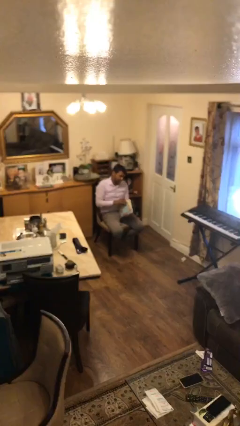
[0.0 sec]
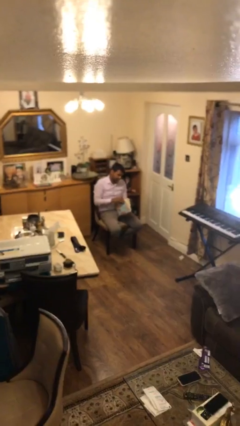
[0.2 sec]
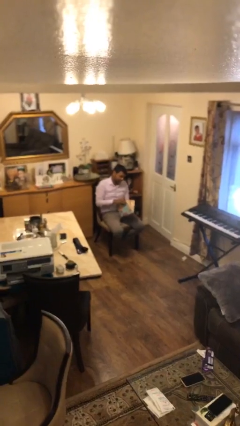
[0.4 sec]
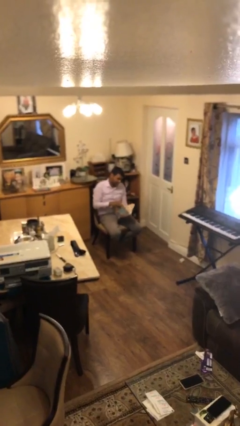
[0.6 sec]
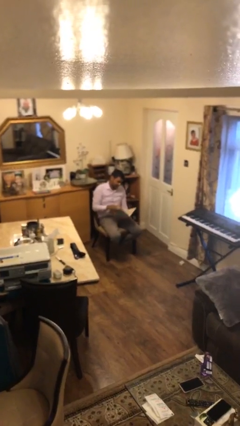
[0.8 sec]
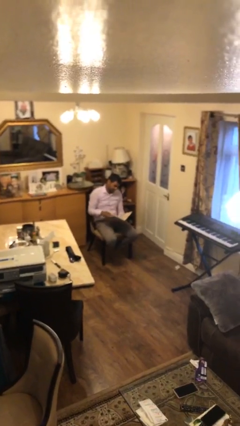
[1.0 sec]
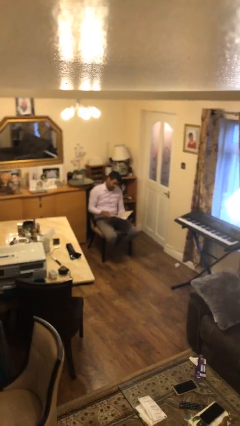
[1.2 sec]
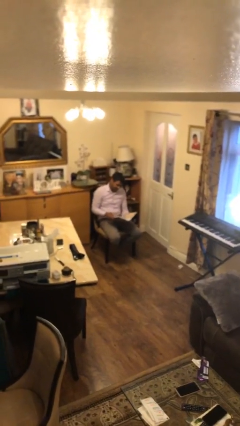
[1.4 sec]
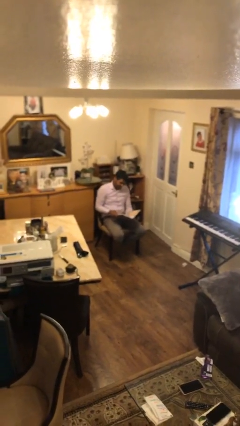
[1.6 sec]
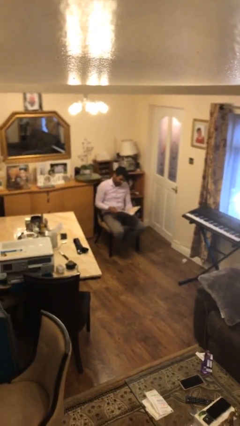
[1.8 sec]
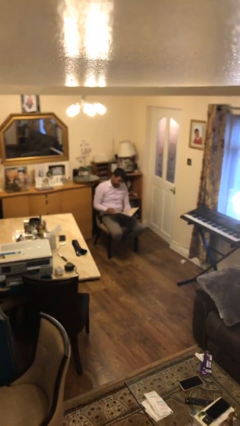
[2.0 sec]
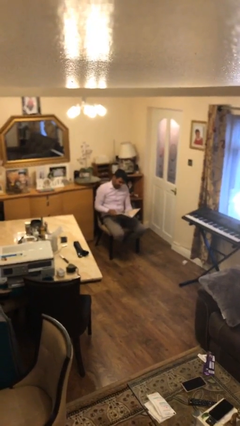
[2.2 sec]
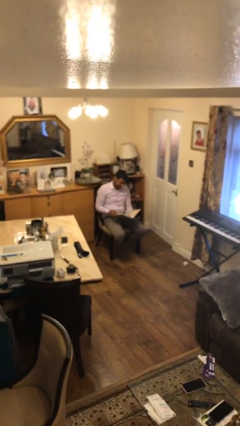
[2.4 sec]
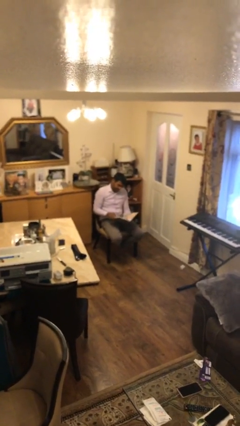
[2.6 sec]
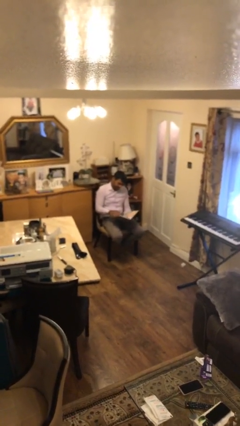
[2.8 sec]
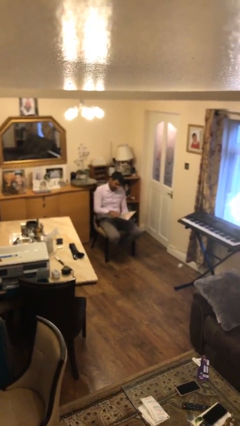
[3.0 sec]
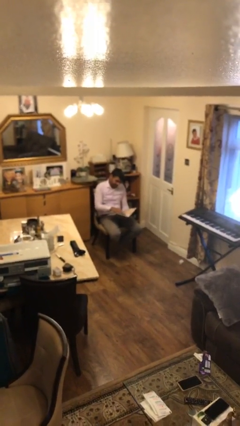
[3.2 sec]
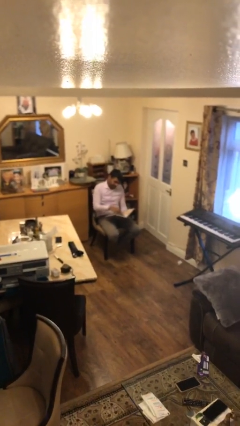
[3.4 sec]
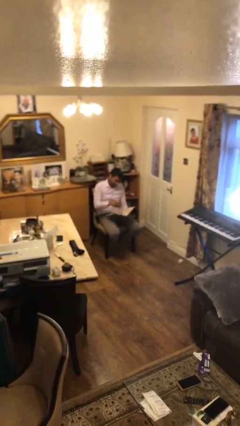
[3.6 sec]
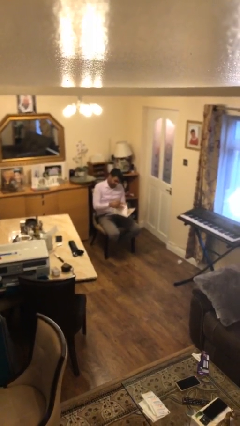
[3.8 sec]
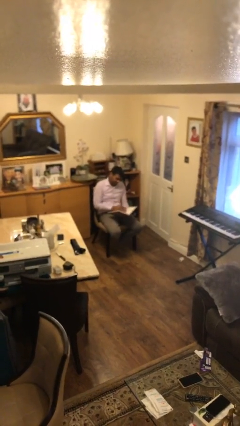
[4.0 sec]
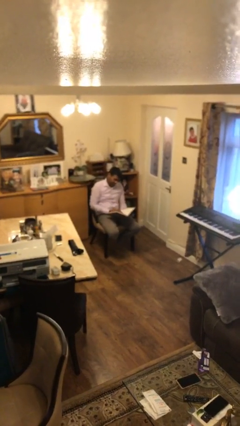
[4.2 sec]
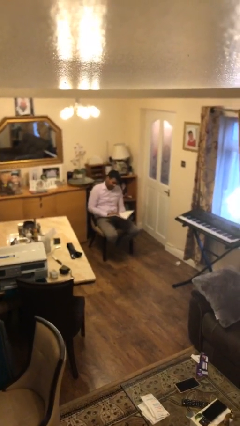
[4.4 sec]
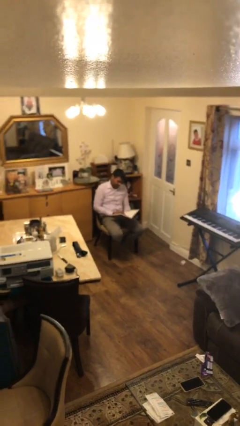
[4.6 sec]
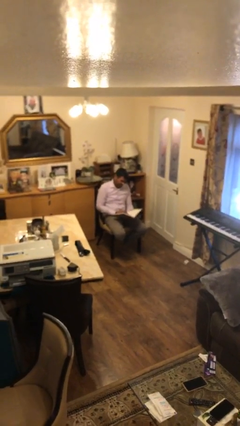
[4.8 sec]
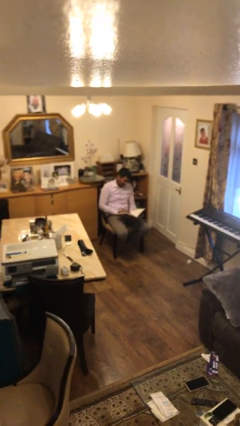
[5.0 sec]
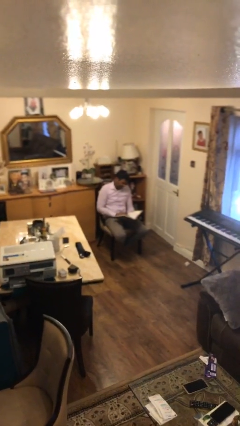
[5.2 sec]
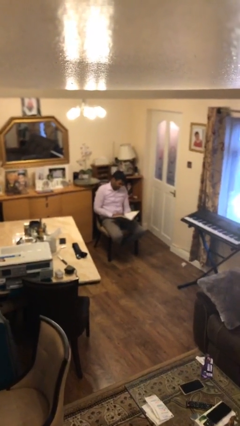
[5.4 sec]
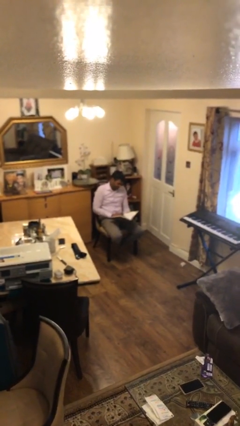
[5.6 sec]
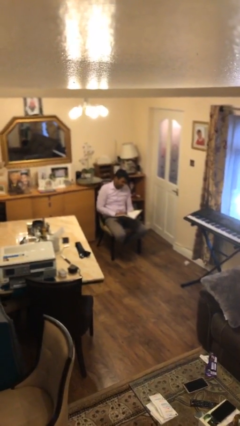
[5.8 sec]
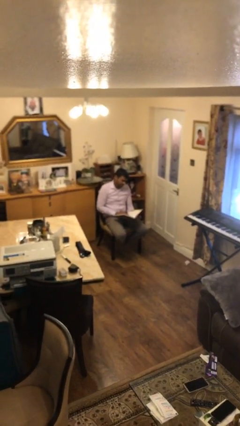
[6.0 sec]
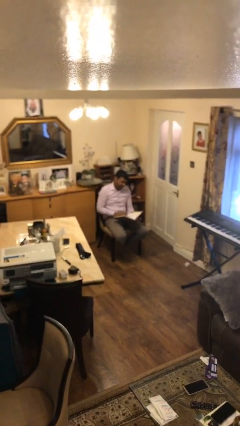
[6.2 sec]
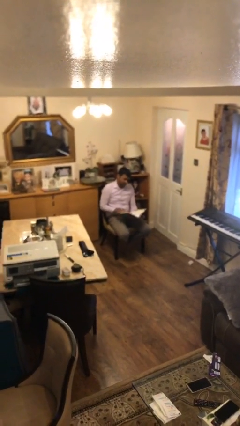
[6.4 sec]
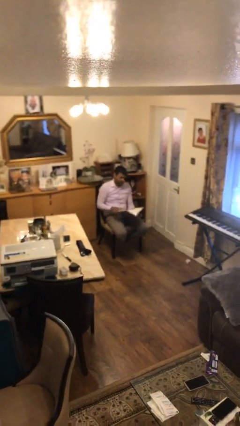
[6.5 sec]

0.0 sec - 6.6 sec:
person reads document

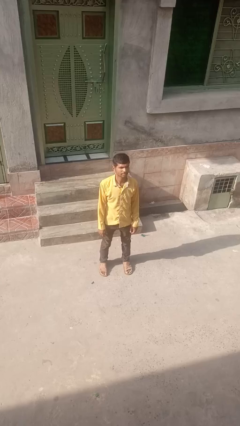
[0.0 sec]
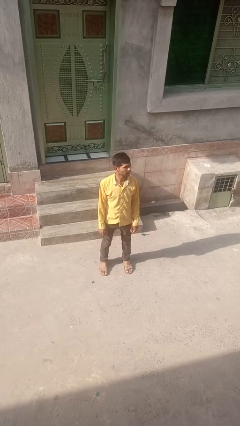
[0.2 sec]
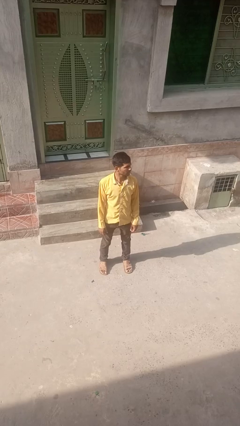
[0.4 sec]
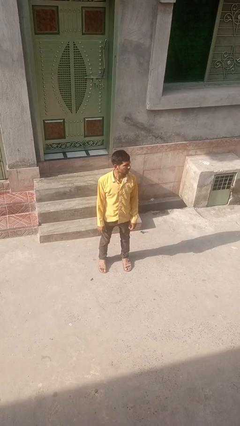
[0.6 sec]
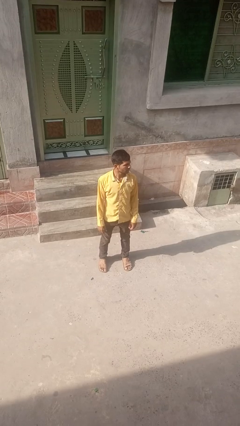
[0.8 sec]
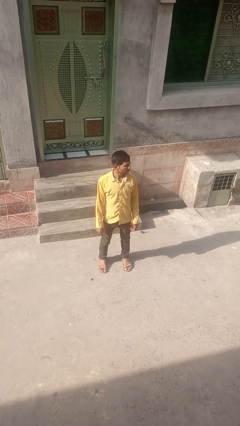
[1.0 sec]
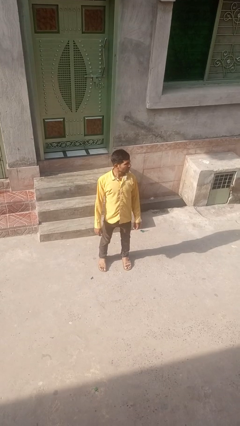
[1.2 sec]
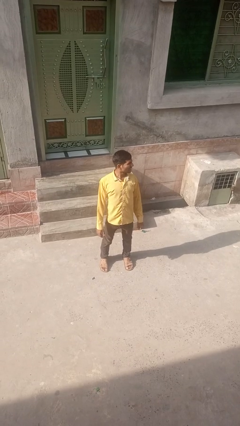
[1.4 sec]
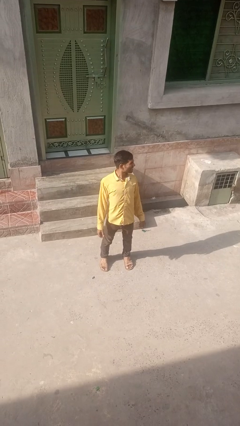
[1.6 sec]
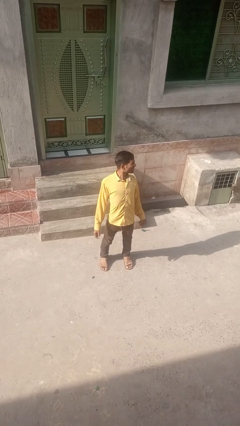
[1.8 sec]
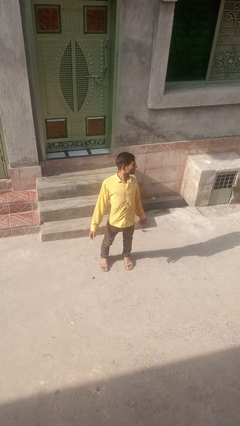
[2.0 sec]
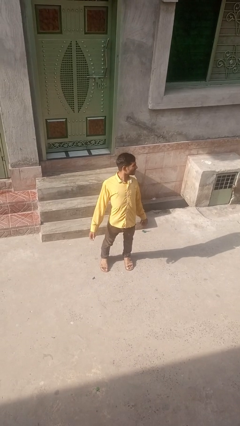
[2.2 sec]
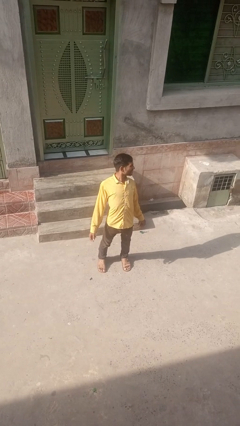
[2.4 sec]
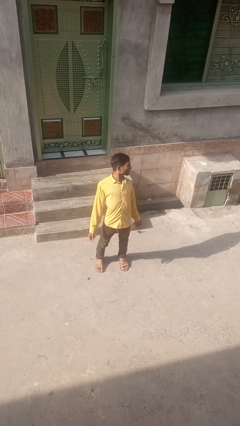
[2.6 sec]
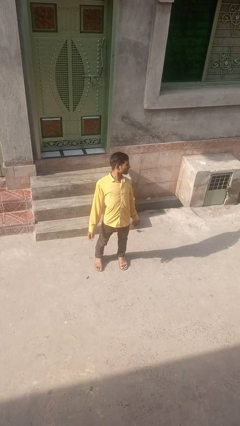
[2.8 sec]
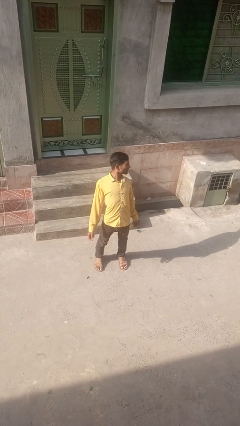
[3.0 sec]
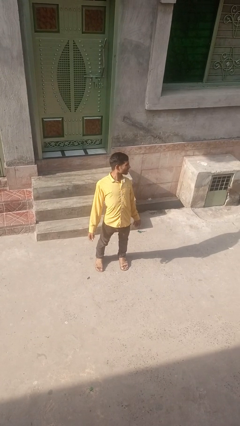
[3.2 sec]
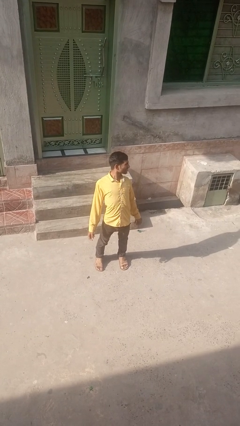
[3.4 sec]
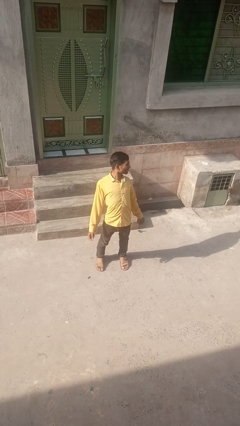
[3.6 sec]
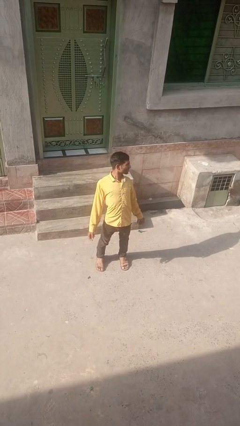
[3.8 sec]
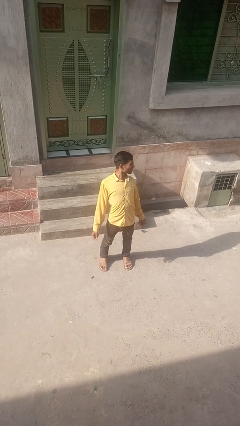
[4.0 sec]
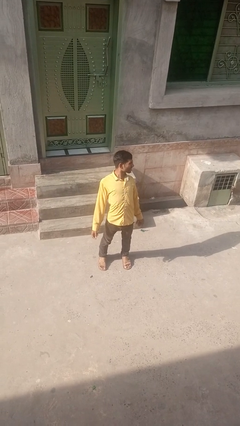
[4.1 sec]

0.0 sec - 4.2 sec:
person stretches back

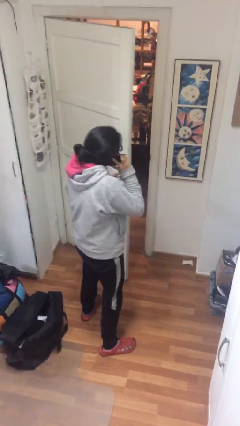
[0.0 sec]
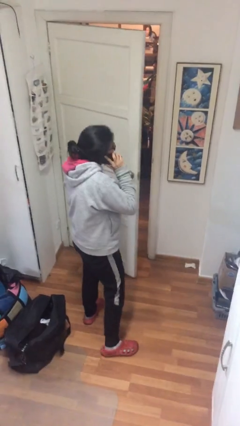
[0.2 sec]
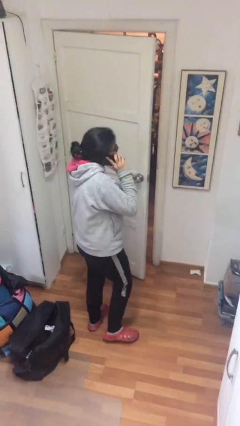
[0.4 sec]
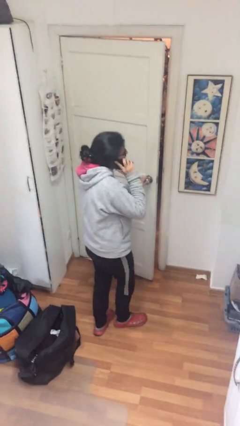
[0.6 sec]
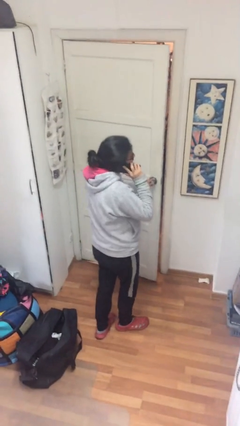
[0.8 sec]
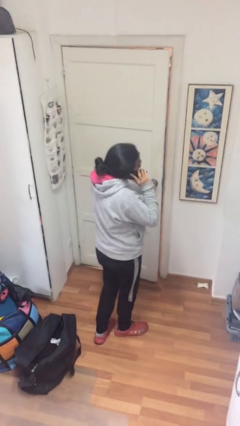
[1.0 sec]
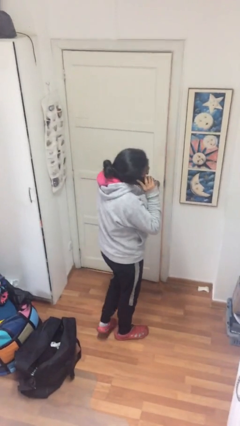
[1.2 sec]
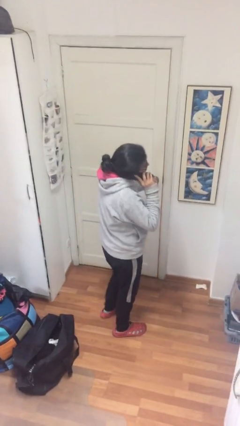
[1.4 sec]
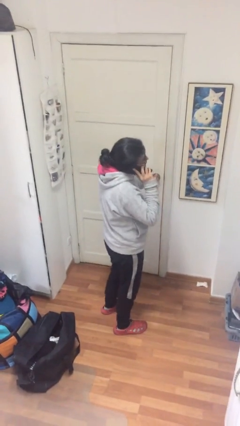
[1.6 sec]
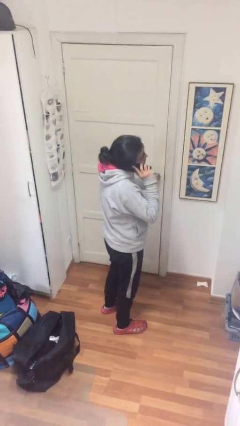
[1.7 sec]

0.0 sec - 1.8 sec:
person closes facility door

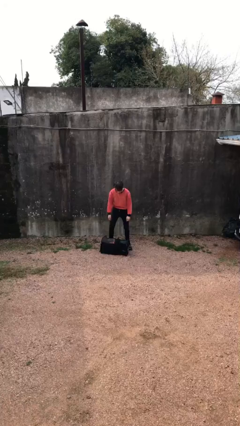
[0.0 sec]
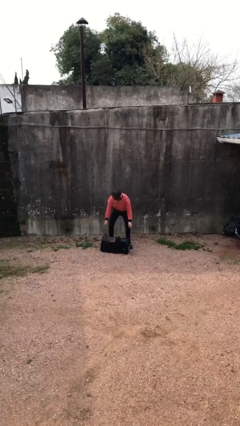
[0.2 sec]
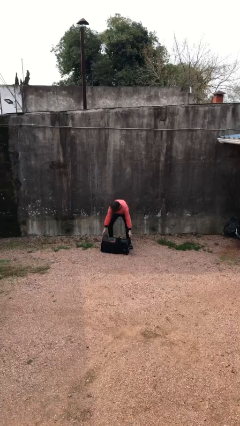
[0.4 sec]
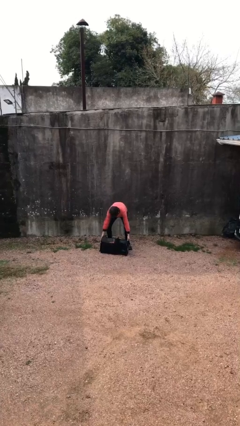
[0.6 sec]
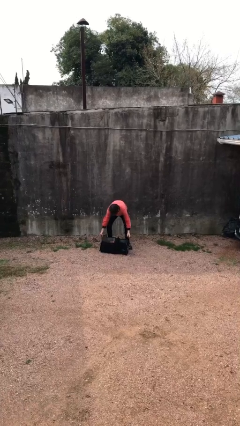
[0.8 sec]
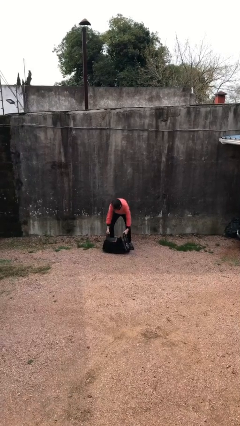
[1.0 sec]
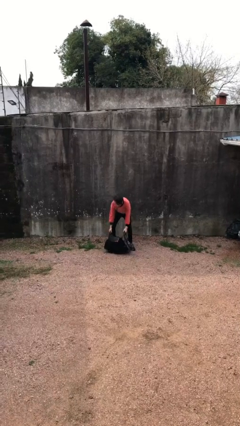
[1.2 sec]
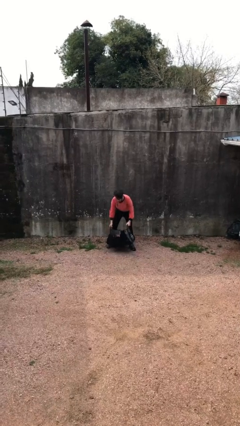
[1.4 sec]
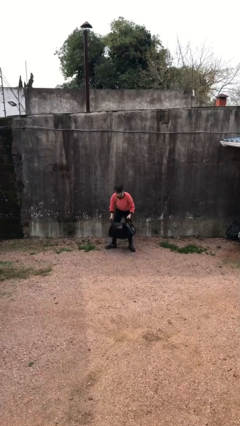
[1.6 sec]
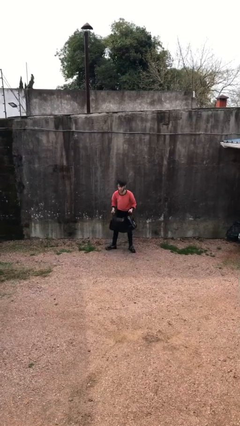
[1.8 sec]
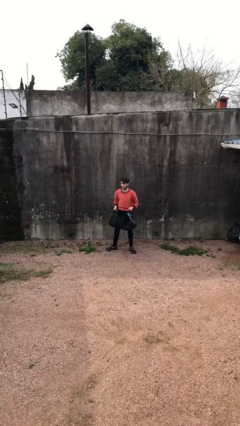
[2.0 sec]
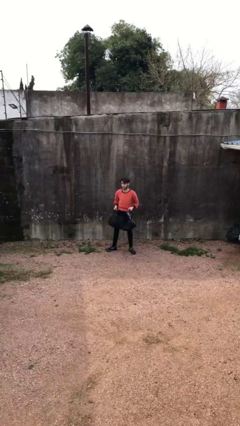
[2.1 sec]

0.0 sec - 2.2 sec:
person picks up object from floor

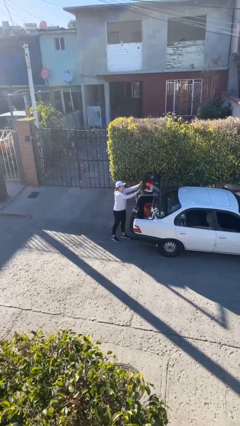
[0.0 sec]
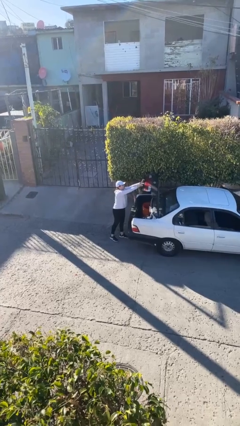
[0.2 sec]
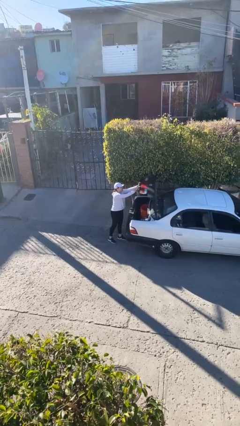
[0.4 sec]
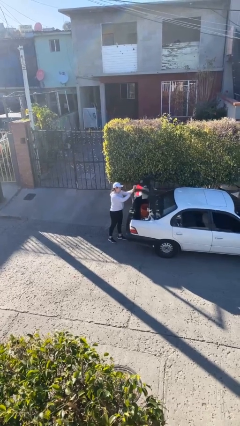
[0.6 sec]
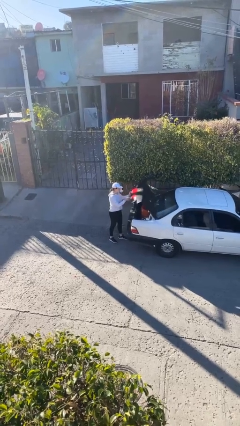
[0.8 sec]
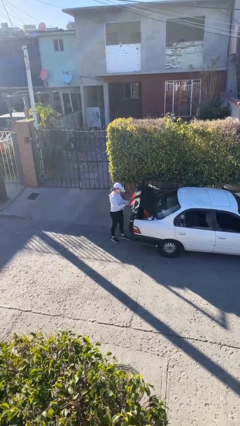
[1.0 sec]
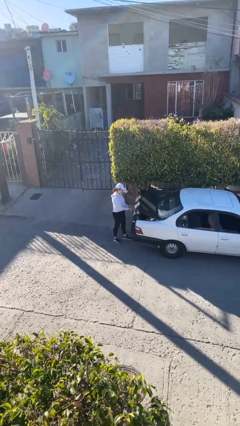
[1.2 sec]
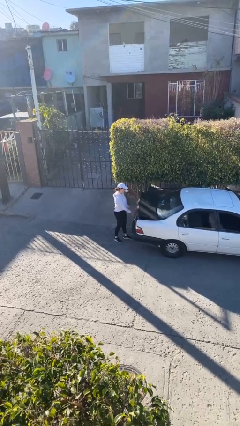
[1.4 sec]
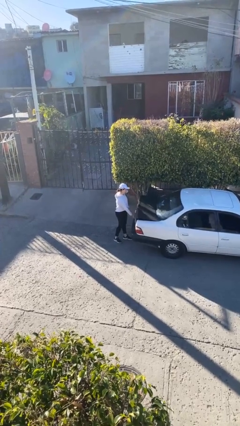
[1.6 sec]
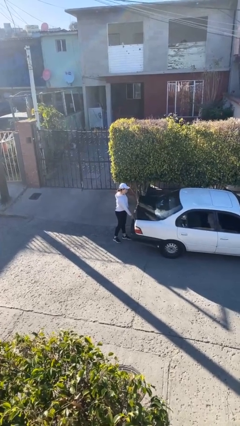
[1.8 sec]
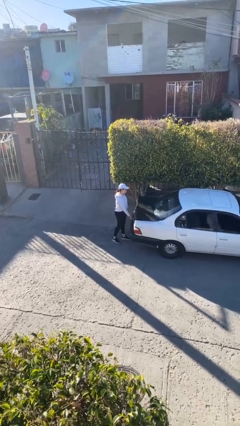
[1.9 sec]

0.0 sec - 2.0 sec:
person closes car trunk

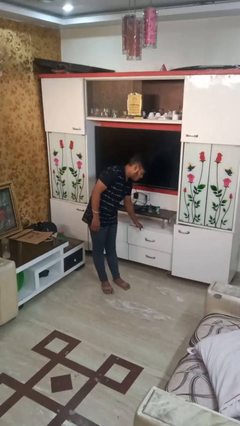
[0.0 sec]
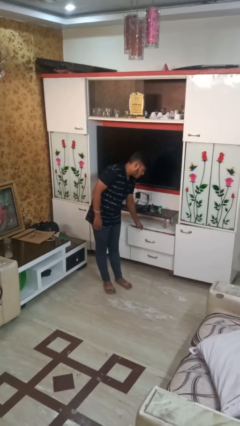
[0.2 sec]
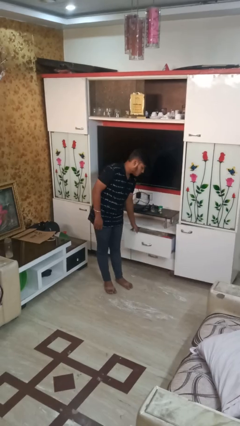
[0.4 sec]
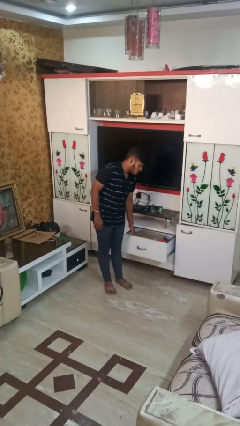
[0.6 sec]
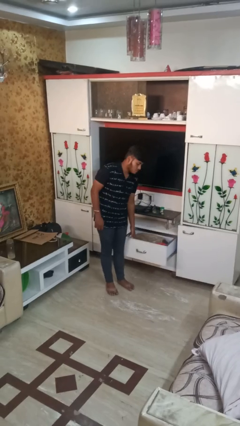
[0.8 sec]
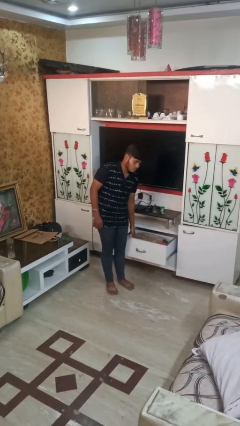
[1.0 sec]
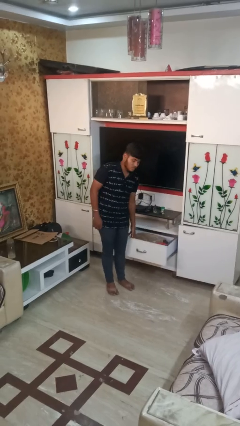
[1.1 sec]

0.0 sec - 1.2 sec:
person opens dresser drawer
